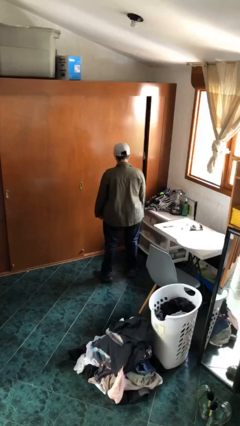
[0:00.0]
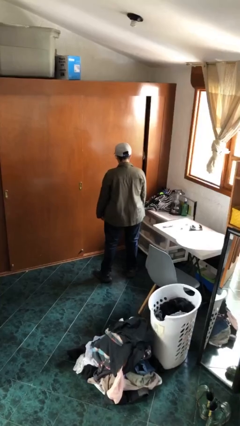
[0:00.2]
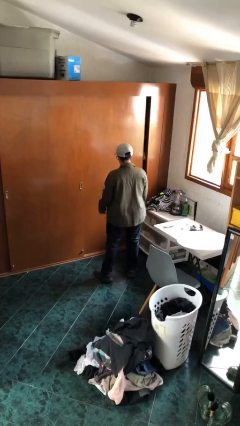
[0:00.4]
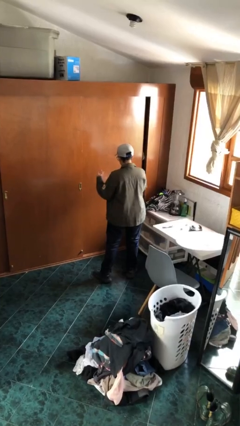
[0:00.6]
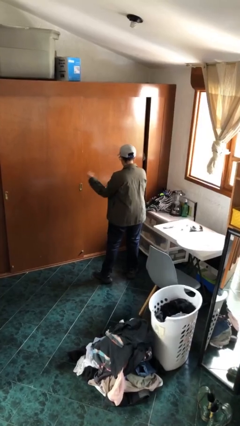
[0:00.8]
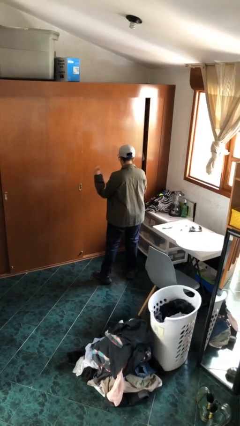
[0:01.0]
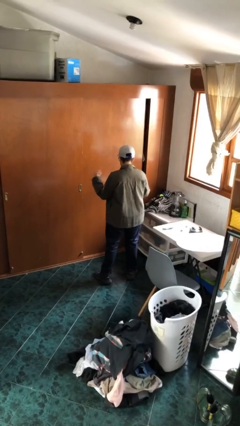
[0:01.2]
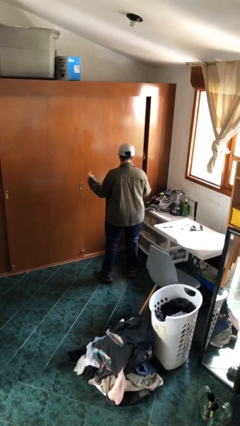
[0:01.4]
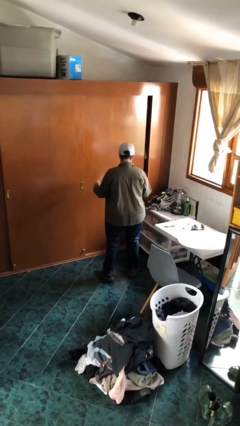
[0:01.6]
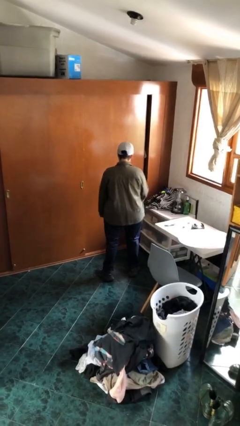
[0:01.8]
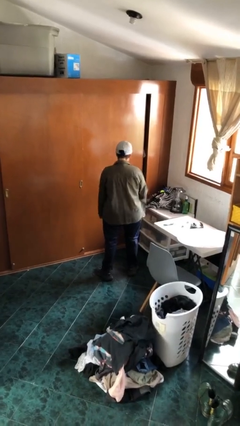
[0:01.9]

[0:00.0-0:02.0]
person snaps fingers

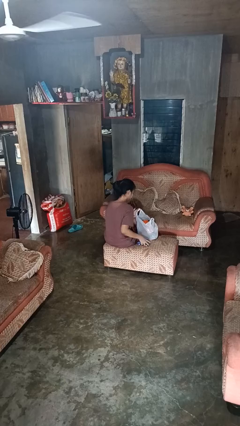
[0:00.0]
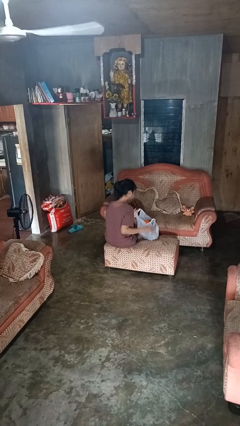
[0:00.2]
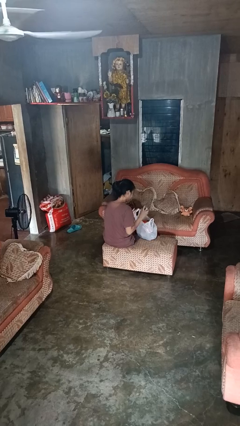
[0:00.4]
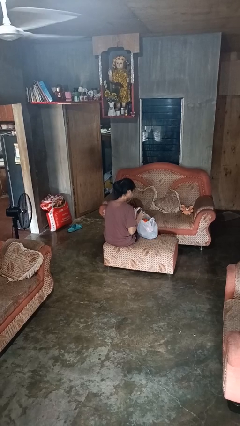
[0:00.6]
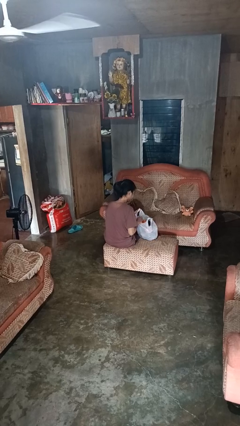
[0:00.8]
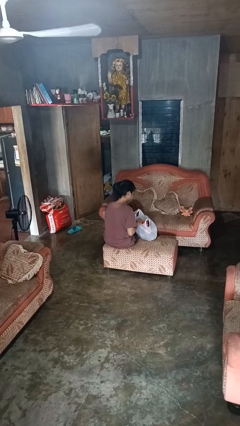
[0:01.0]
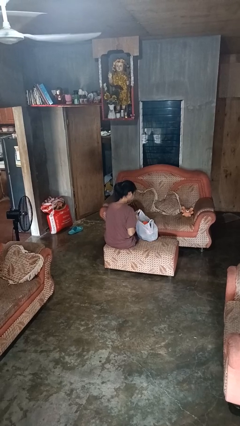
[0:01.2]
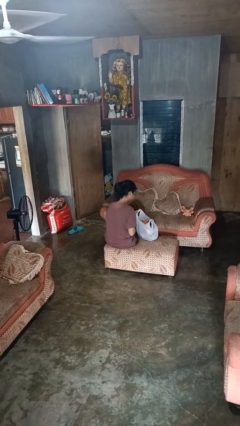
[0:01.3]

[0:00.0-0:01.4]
person puts object into bag

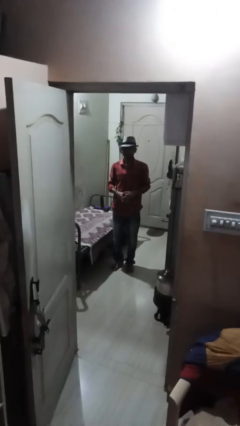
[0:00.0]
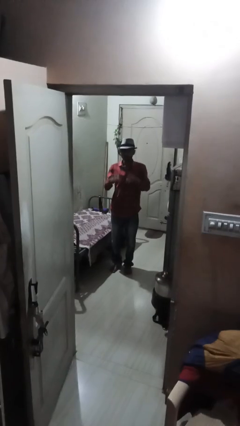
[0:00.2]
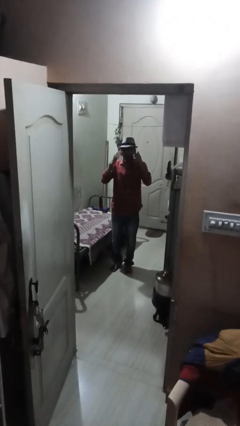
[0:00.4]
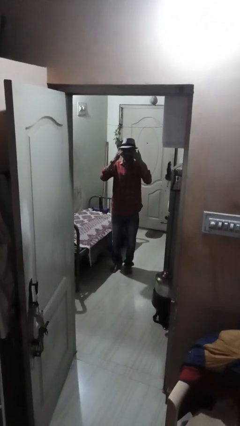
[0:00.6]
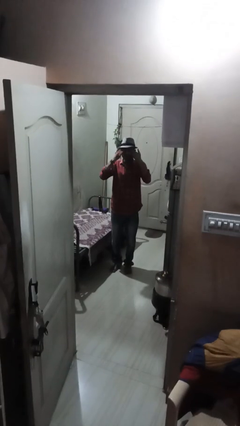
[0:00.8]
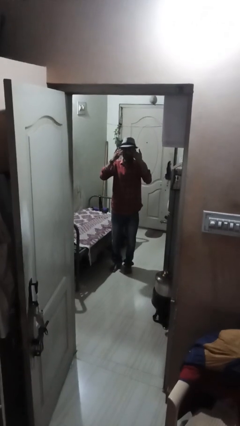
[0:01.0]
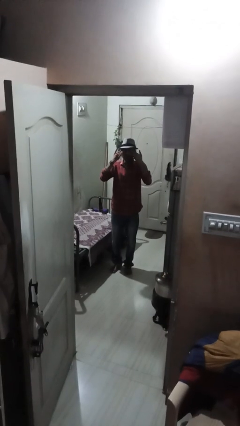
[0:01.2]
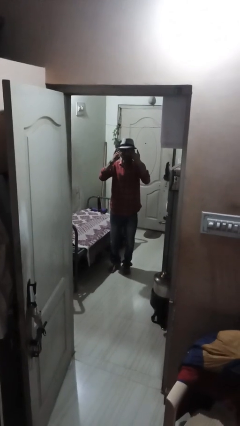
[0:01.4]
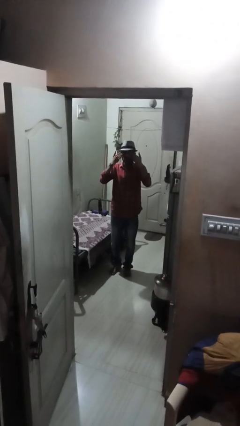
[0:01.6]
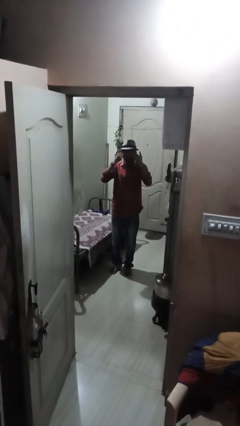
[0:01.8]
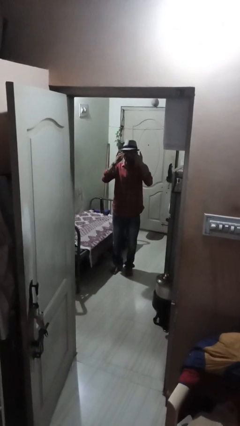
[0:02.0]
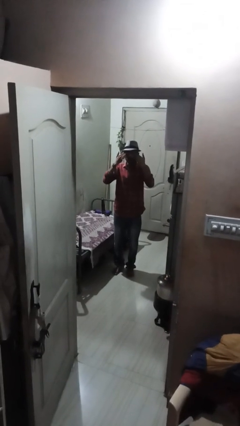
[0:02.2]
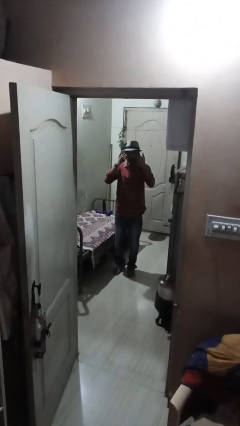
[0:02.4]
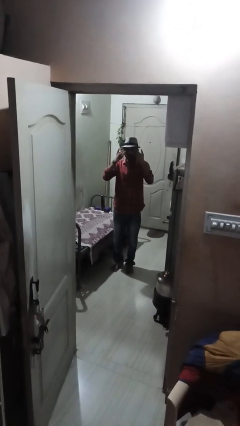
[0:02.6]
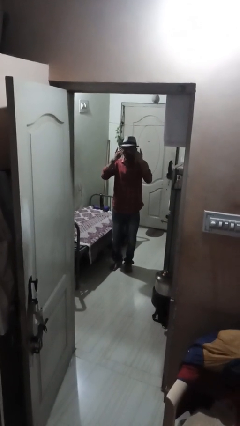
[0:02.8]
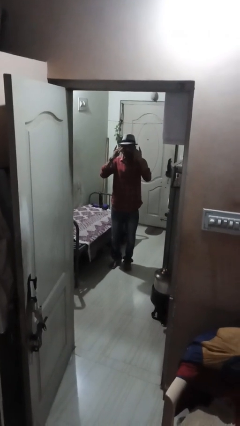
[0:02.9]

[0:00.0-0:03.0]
person rubs eyes

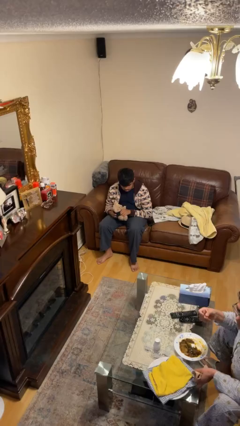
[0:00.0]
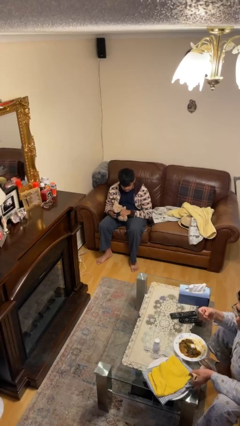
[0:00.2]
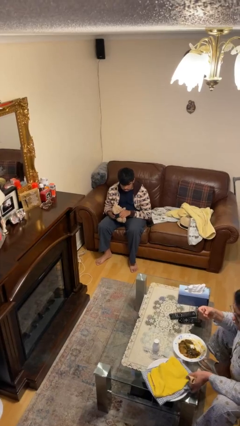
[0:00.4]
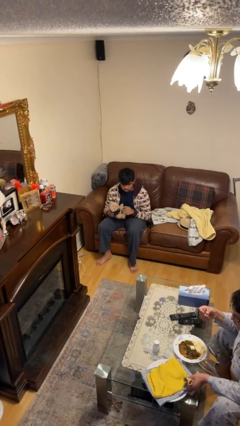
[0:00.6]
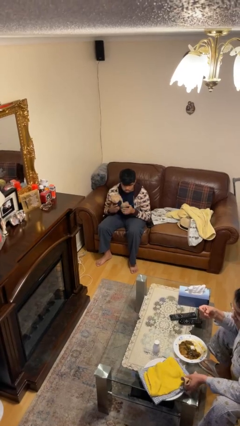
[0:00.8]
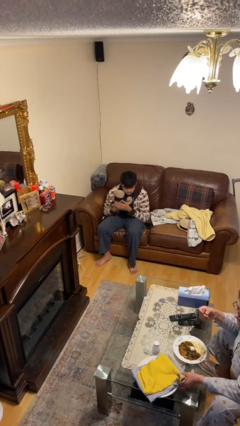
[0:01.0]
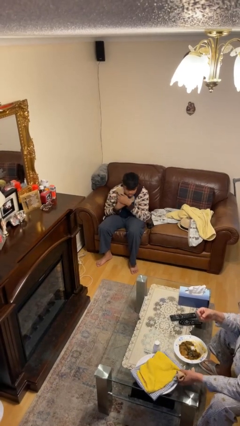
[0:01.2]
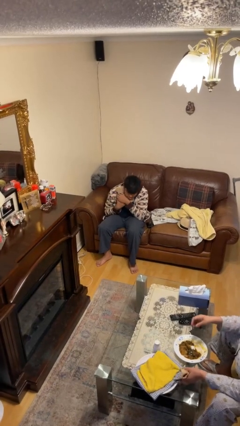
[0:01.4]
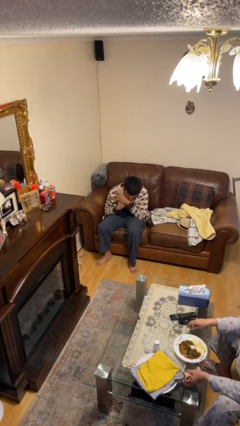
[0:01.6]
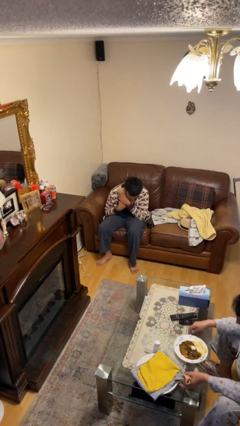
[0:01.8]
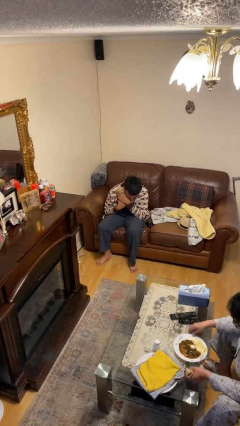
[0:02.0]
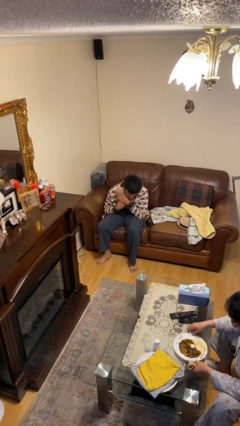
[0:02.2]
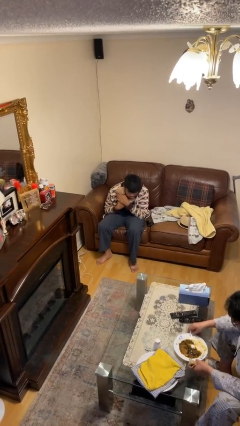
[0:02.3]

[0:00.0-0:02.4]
person hugs stuffed animal

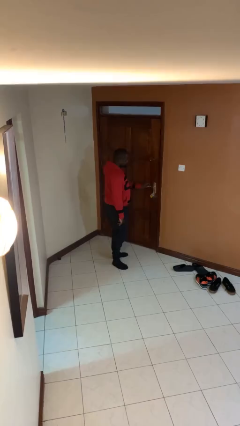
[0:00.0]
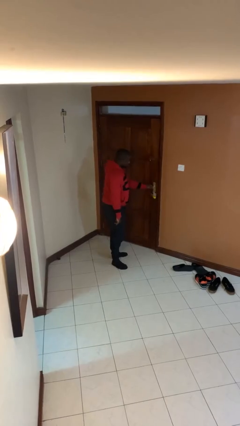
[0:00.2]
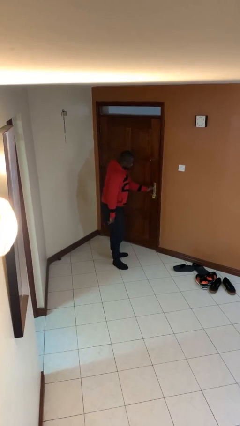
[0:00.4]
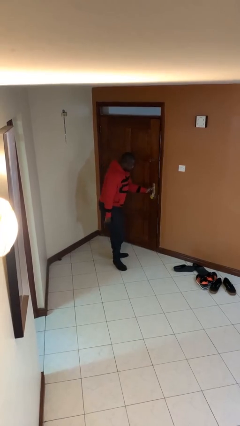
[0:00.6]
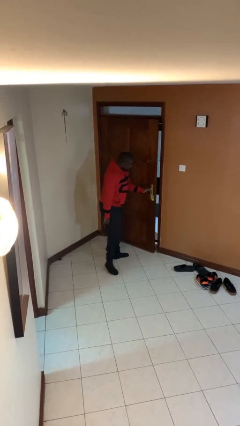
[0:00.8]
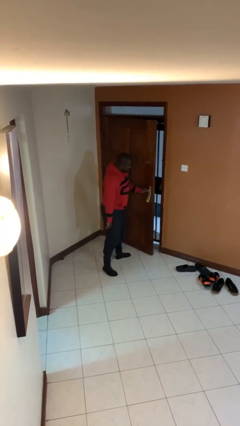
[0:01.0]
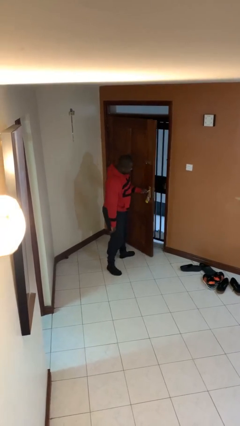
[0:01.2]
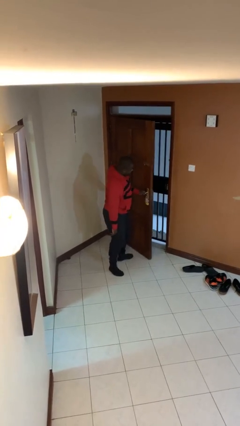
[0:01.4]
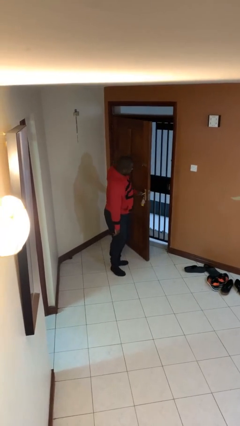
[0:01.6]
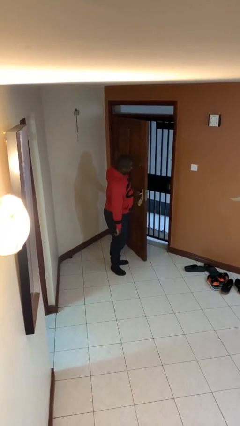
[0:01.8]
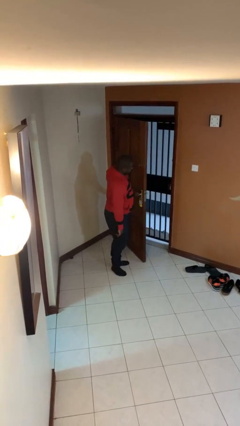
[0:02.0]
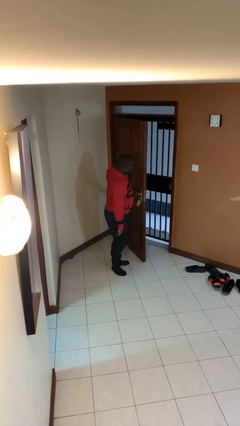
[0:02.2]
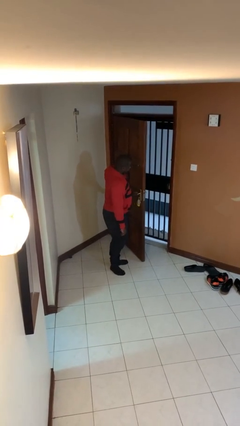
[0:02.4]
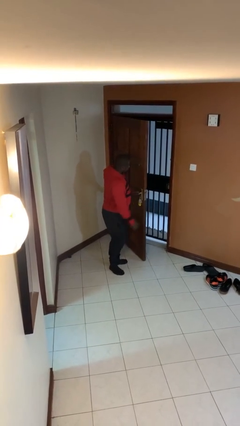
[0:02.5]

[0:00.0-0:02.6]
person opens facility door

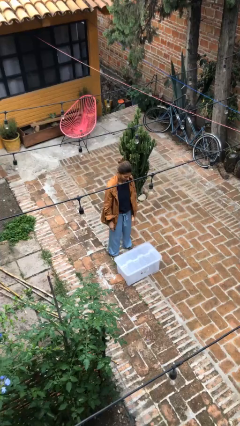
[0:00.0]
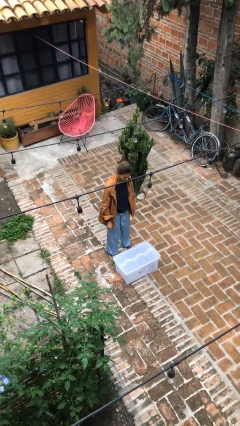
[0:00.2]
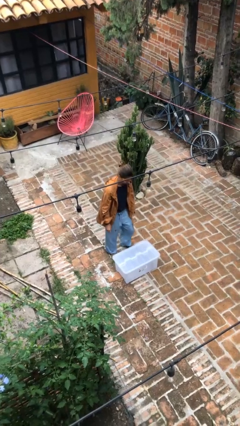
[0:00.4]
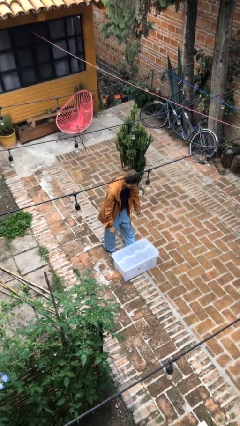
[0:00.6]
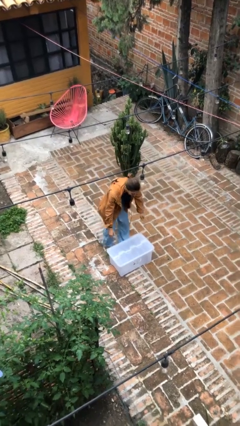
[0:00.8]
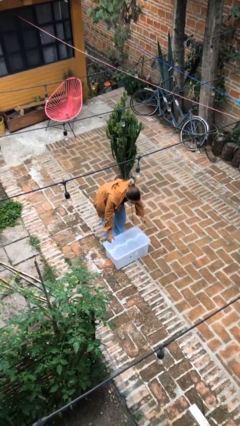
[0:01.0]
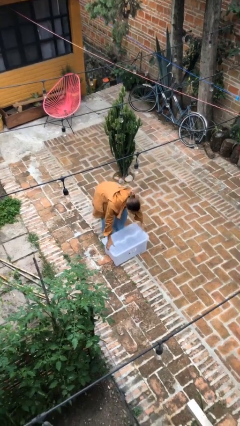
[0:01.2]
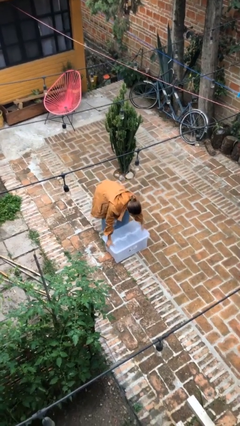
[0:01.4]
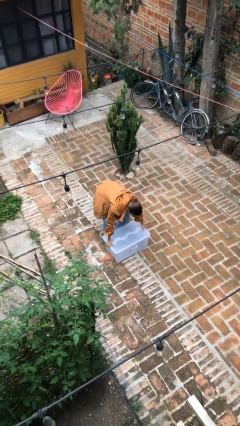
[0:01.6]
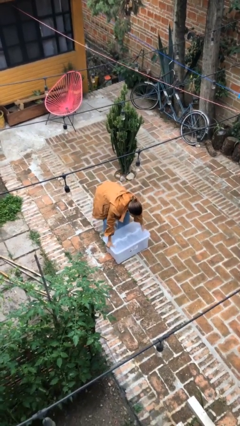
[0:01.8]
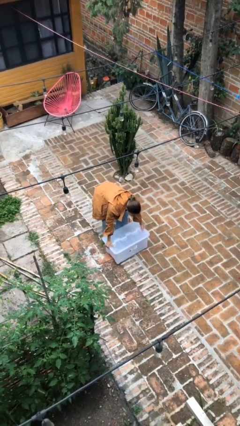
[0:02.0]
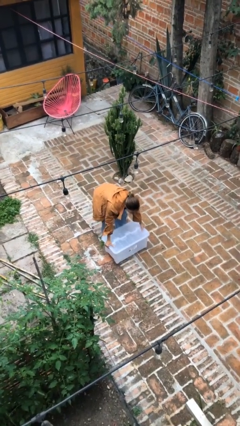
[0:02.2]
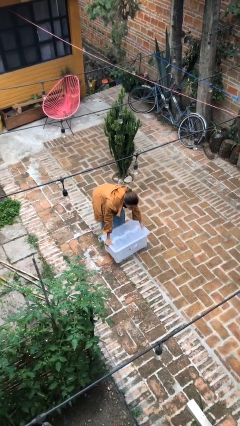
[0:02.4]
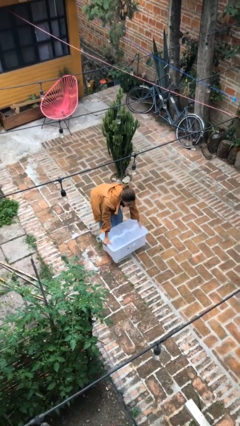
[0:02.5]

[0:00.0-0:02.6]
person picks up object from floor

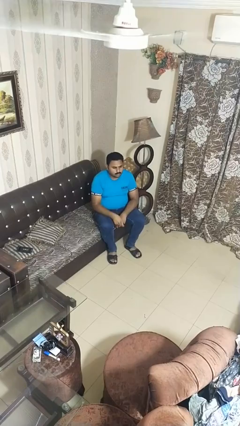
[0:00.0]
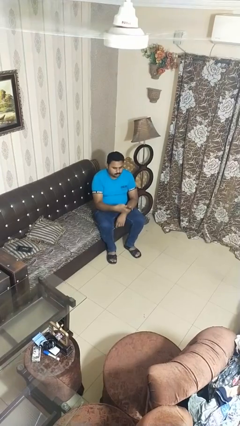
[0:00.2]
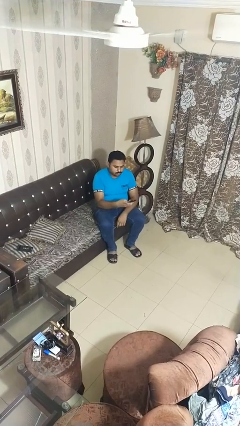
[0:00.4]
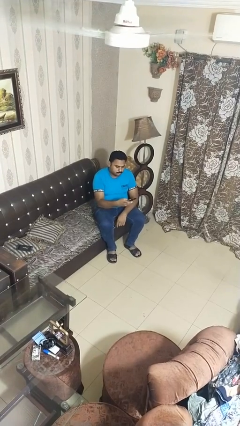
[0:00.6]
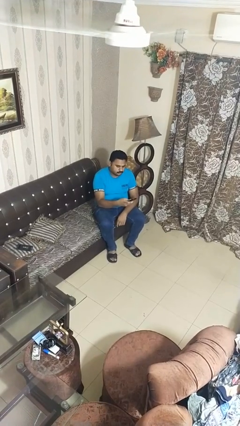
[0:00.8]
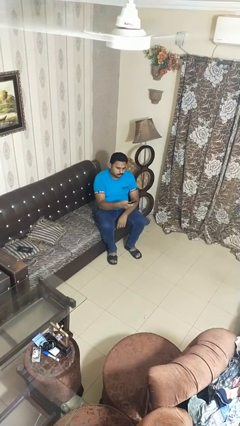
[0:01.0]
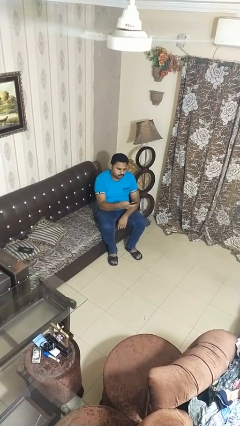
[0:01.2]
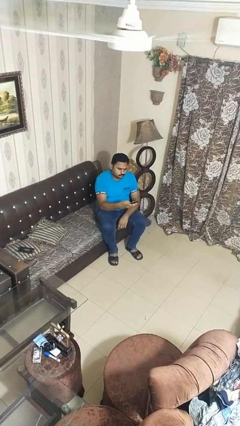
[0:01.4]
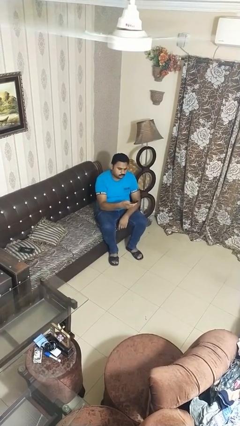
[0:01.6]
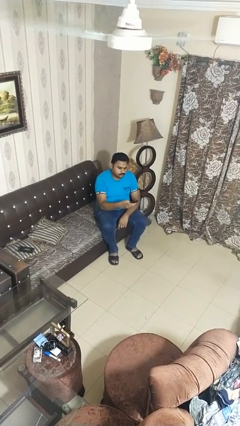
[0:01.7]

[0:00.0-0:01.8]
person uses television remote

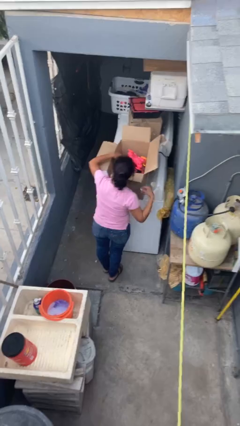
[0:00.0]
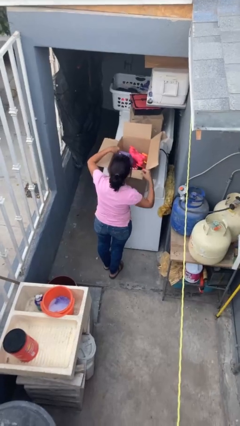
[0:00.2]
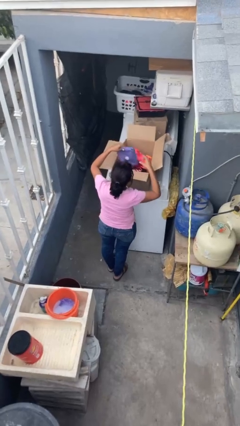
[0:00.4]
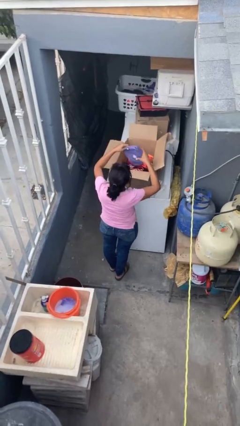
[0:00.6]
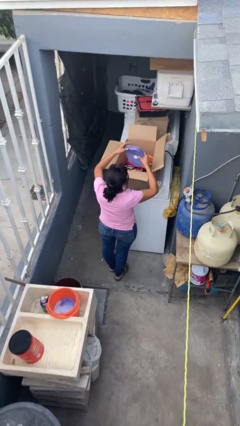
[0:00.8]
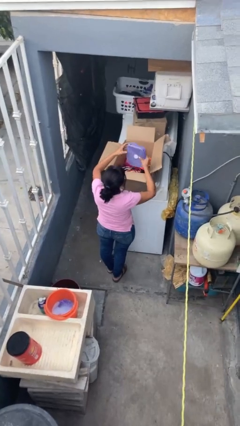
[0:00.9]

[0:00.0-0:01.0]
person takes object from box
